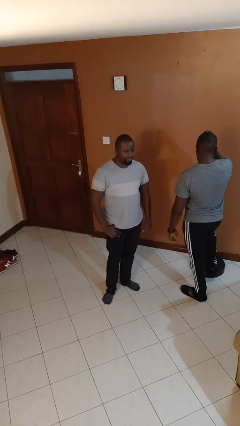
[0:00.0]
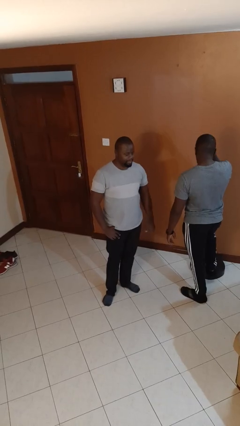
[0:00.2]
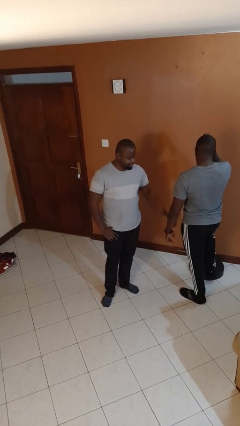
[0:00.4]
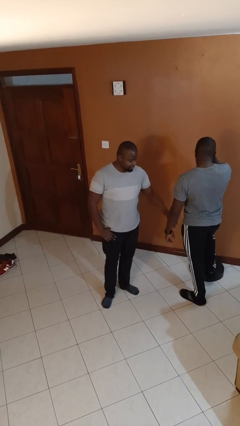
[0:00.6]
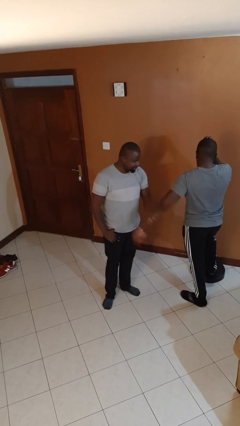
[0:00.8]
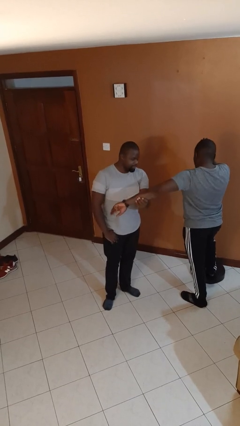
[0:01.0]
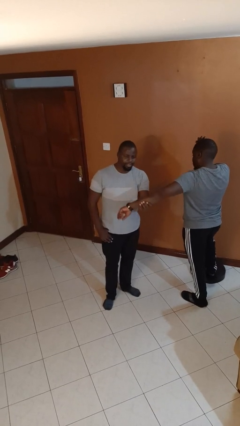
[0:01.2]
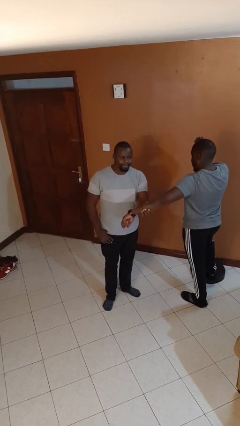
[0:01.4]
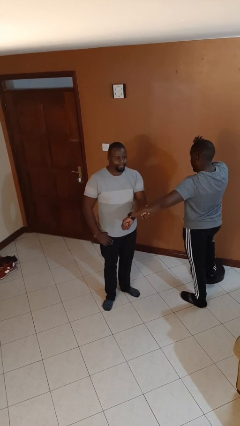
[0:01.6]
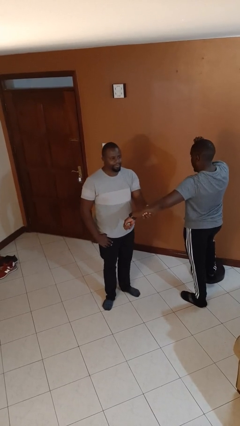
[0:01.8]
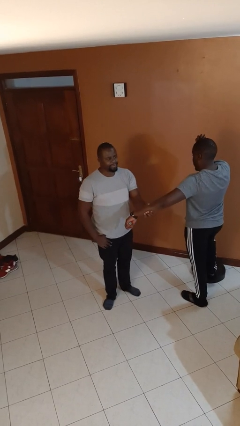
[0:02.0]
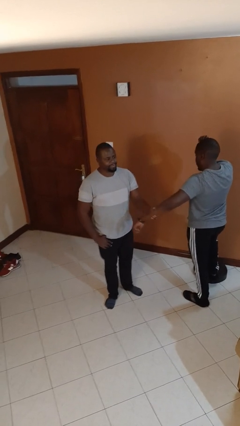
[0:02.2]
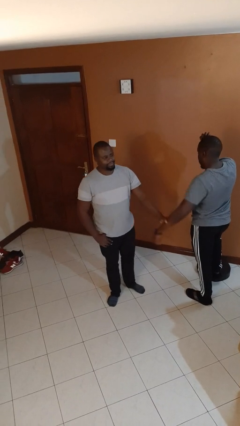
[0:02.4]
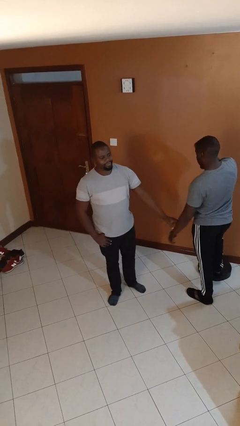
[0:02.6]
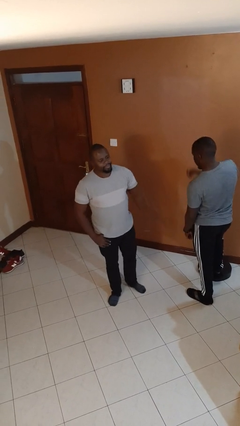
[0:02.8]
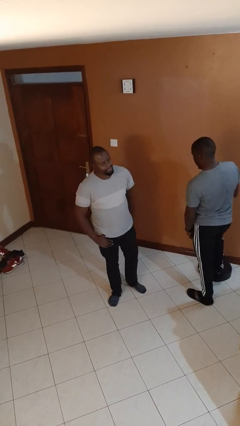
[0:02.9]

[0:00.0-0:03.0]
person grabs person by forearm

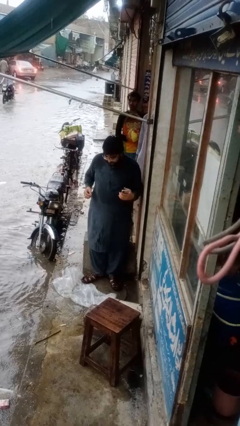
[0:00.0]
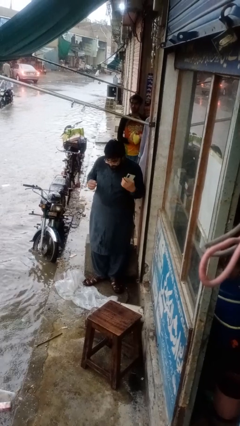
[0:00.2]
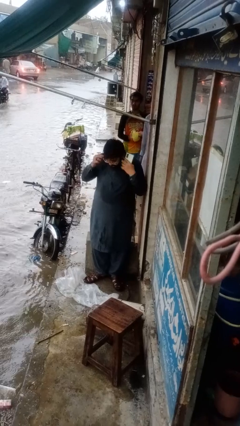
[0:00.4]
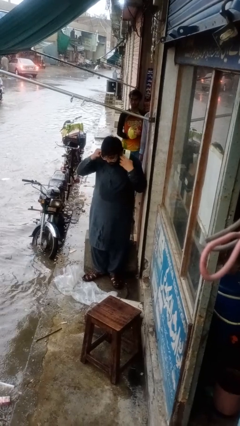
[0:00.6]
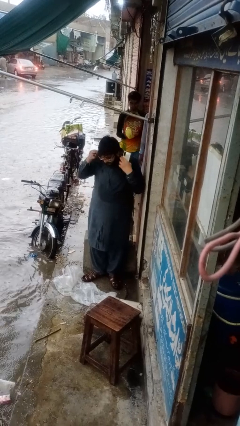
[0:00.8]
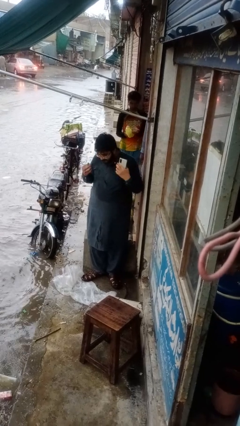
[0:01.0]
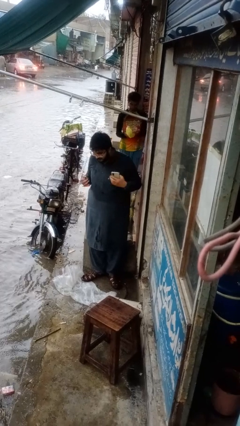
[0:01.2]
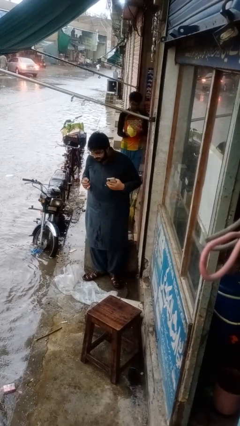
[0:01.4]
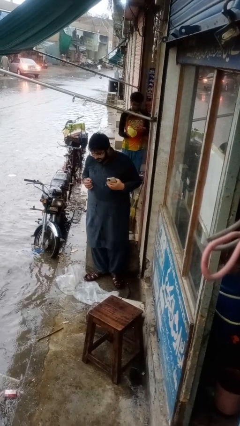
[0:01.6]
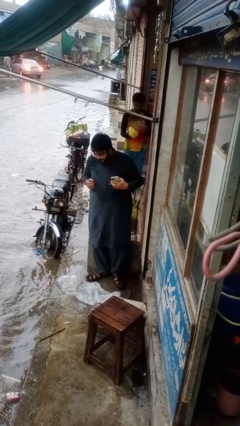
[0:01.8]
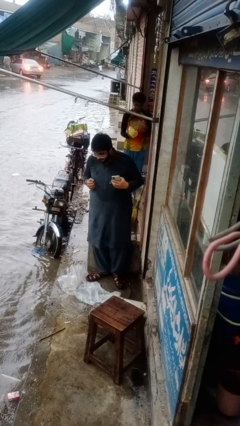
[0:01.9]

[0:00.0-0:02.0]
person takes off headphones

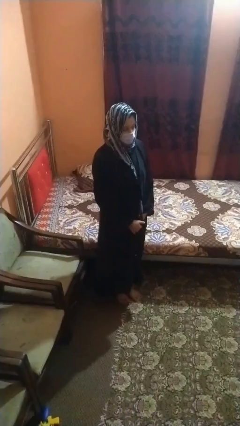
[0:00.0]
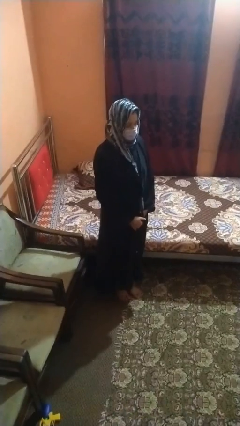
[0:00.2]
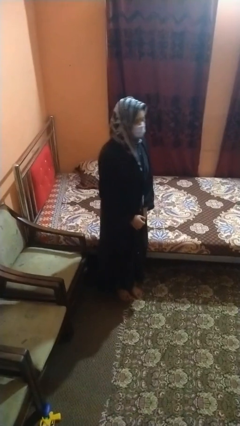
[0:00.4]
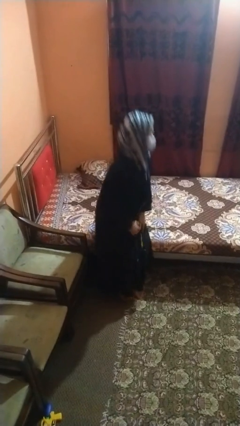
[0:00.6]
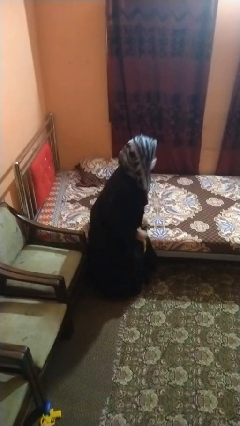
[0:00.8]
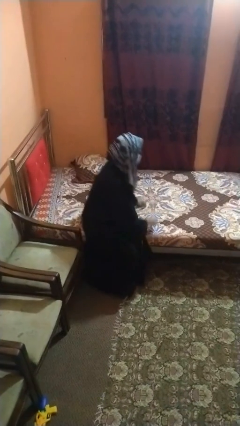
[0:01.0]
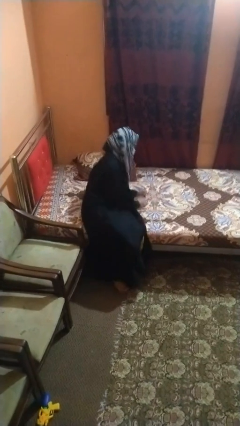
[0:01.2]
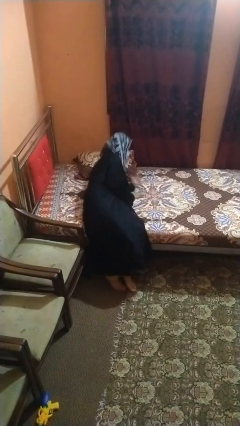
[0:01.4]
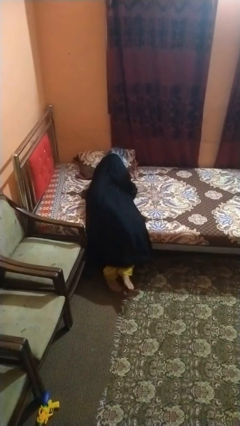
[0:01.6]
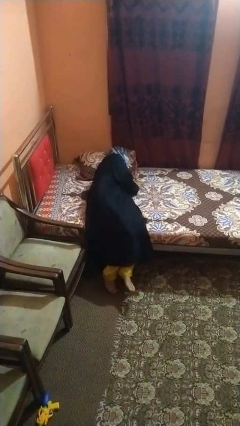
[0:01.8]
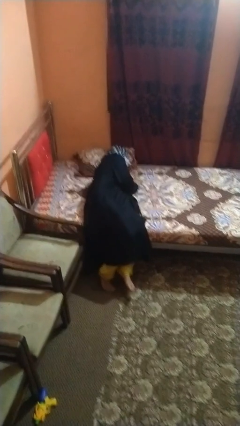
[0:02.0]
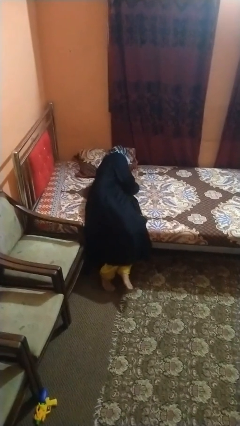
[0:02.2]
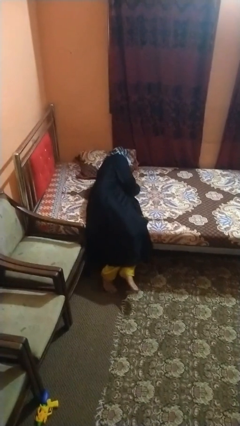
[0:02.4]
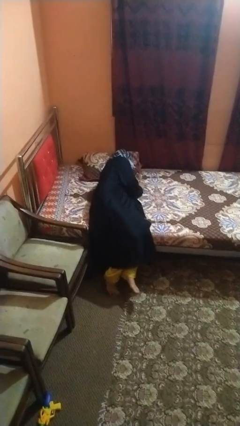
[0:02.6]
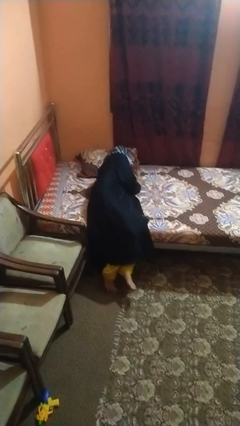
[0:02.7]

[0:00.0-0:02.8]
person lies down on bed

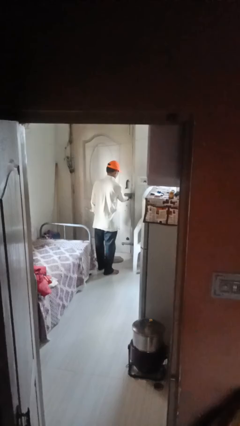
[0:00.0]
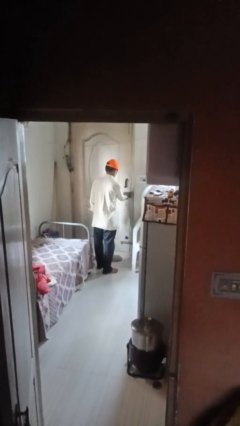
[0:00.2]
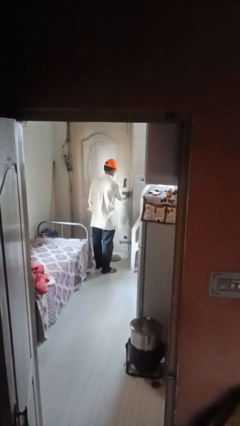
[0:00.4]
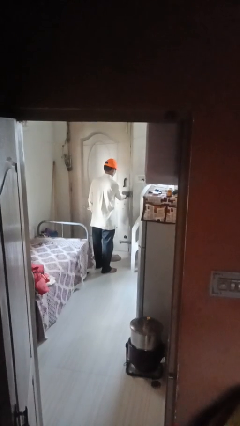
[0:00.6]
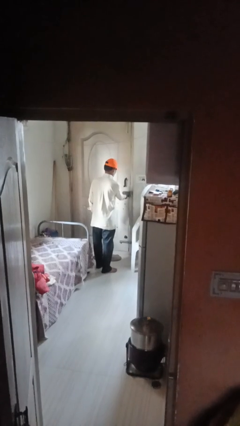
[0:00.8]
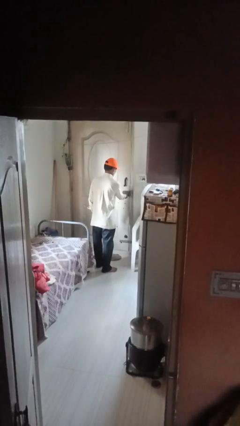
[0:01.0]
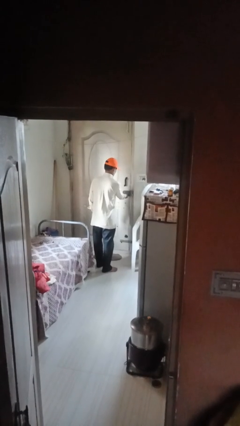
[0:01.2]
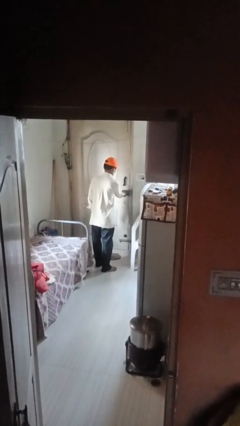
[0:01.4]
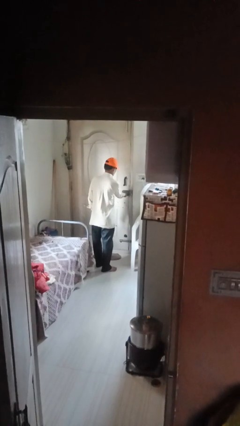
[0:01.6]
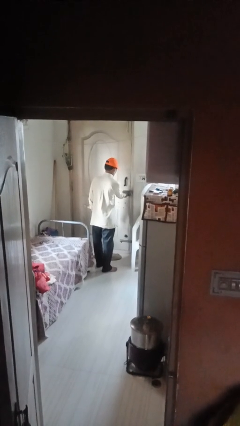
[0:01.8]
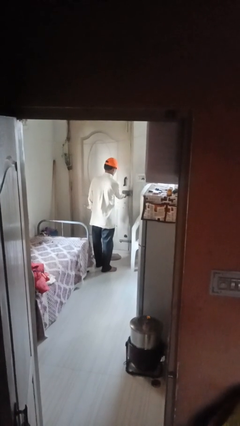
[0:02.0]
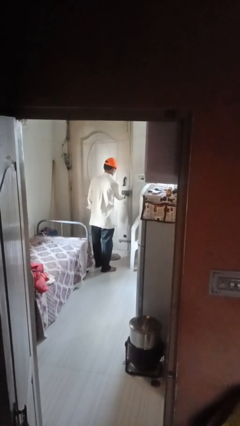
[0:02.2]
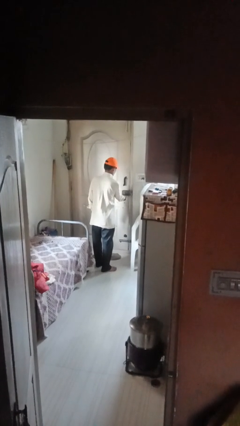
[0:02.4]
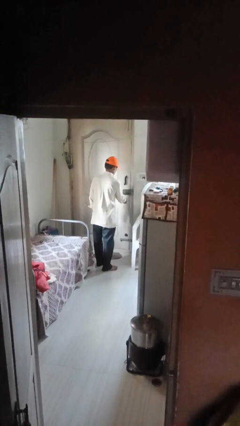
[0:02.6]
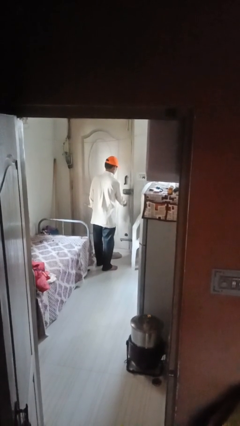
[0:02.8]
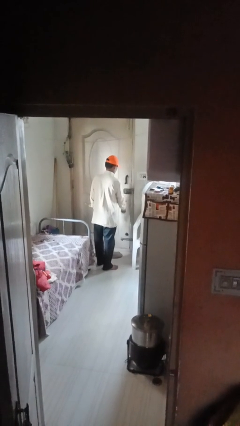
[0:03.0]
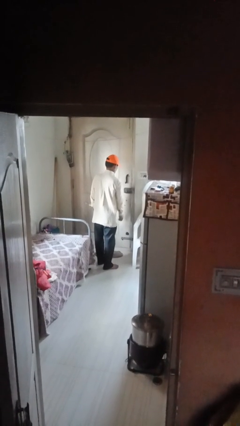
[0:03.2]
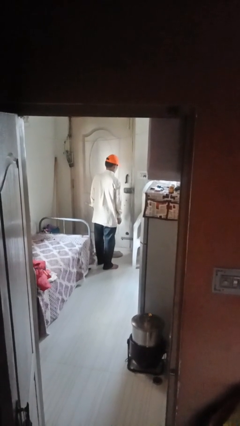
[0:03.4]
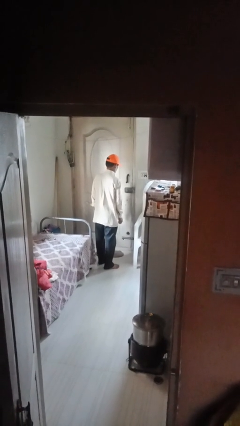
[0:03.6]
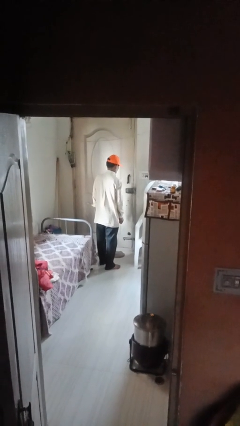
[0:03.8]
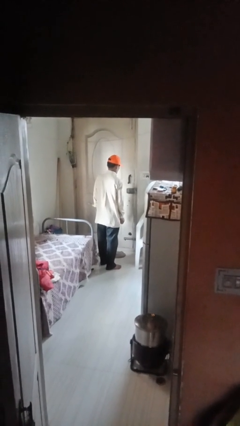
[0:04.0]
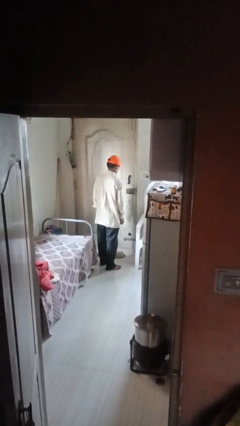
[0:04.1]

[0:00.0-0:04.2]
person locks door with keys

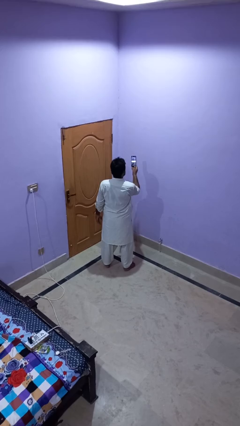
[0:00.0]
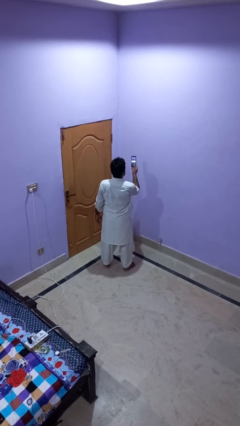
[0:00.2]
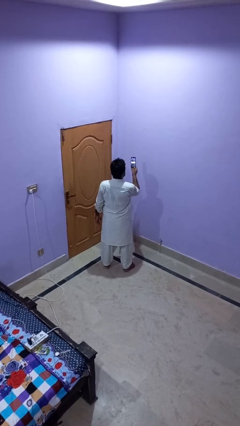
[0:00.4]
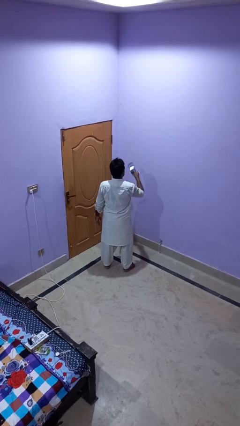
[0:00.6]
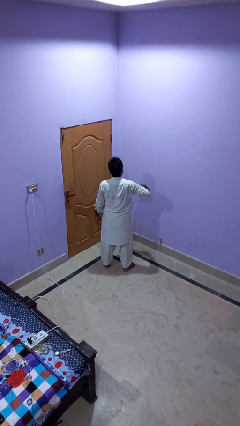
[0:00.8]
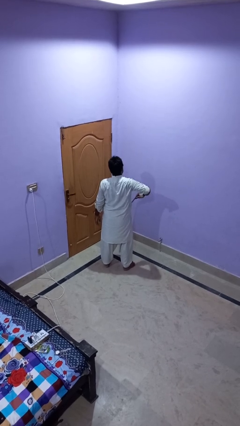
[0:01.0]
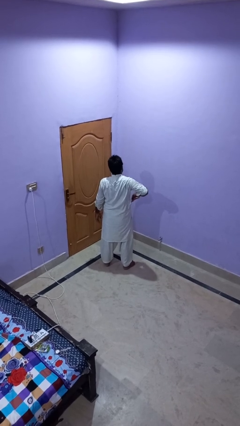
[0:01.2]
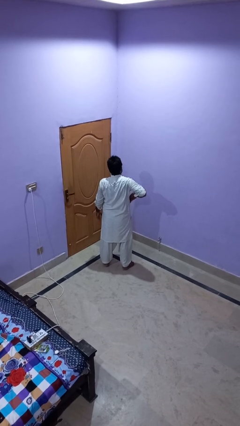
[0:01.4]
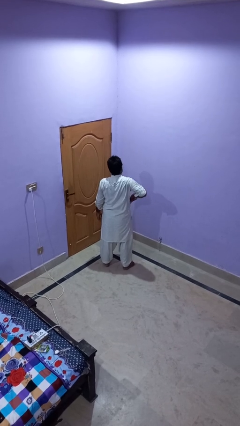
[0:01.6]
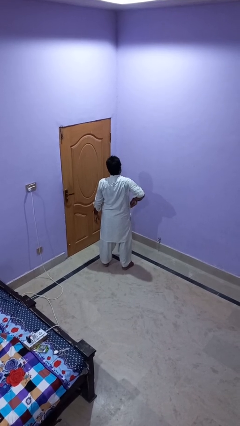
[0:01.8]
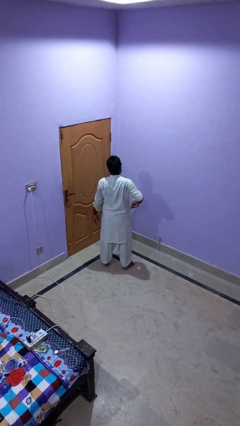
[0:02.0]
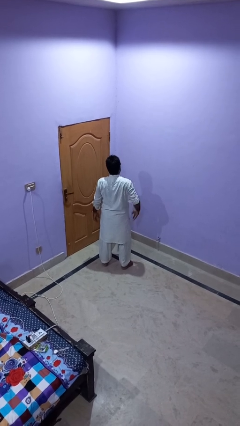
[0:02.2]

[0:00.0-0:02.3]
person puts phone into pocket

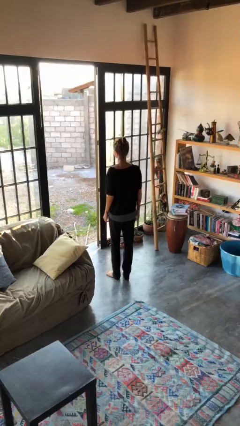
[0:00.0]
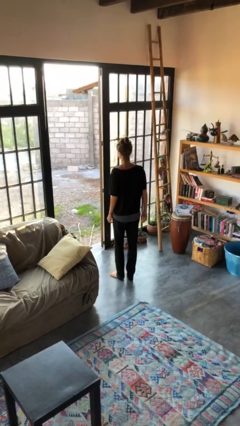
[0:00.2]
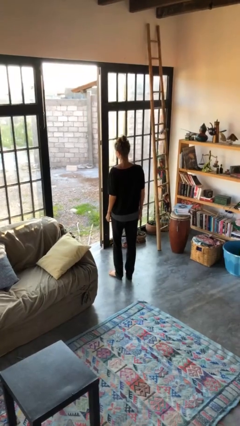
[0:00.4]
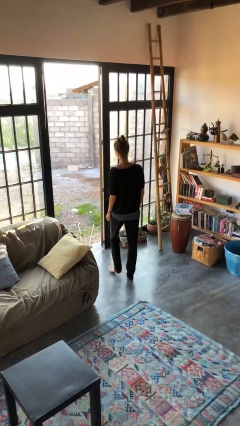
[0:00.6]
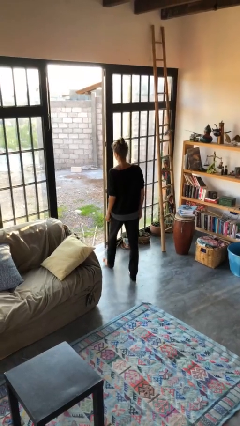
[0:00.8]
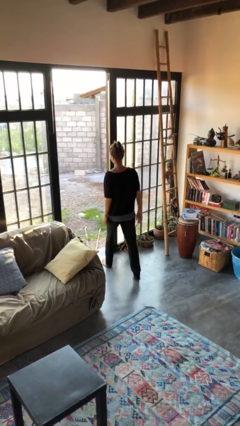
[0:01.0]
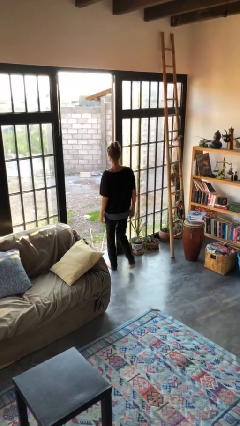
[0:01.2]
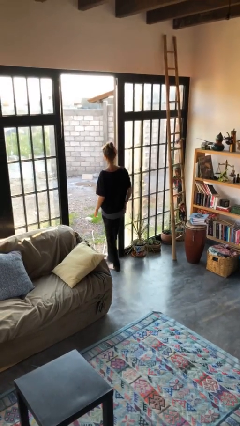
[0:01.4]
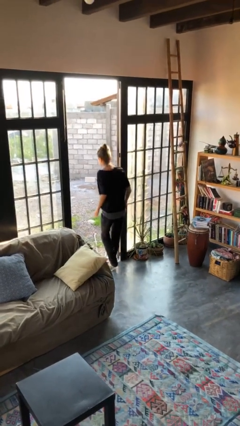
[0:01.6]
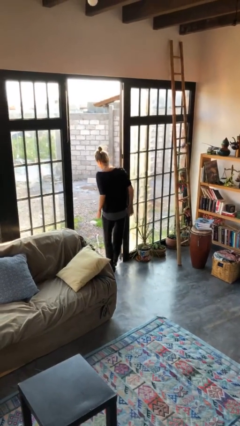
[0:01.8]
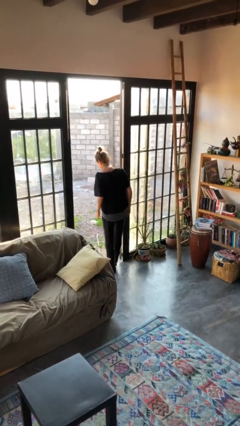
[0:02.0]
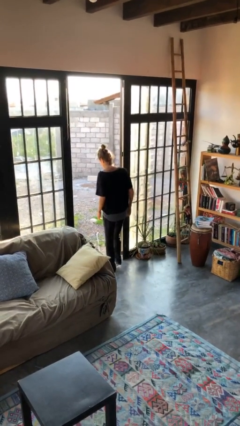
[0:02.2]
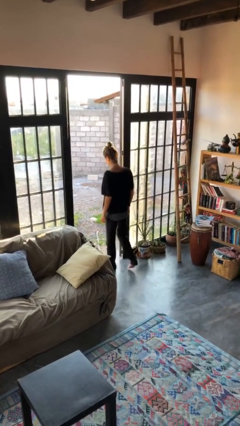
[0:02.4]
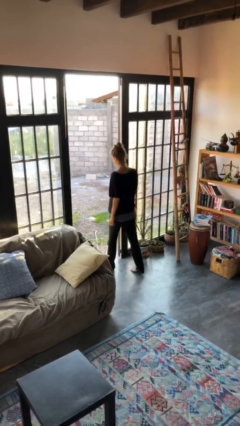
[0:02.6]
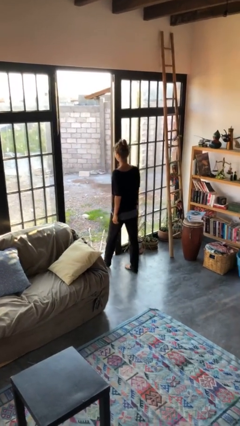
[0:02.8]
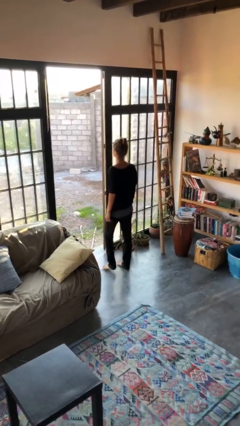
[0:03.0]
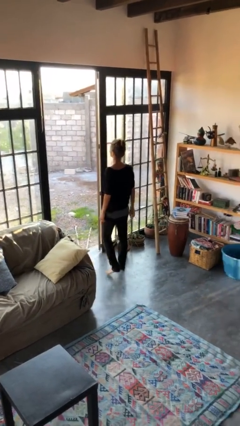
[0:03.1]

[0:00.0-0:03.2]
person bumps into wall
